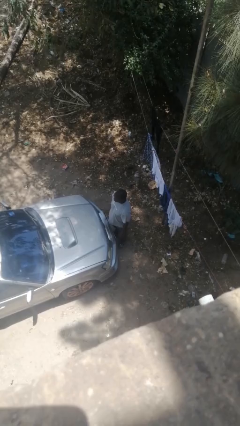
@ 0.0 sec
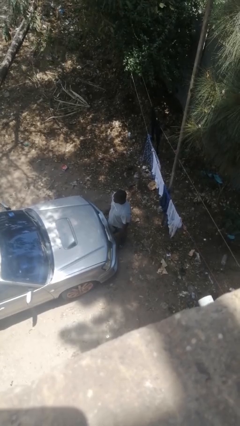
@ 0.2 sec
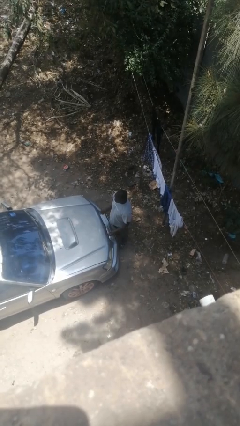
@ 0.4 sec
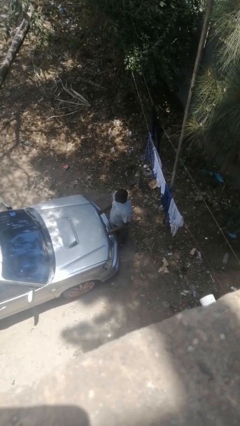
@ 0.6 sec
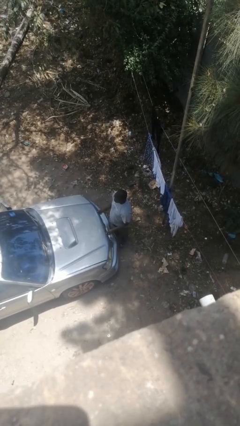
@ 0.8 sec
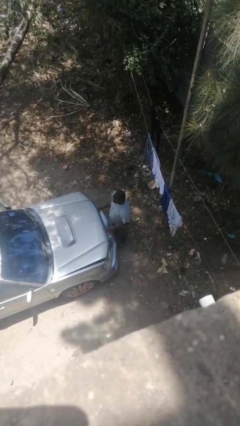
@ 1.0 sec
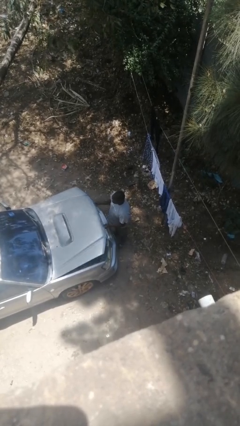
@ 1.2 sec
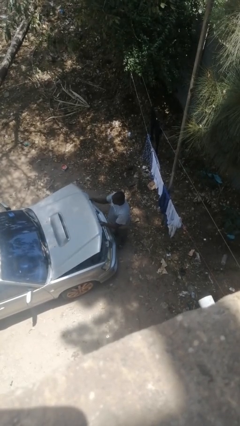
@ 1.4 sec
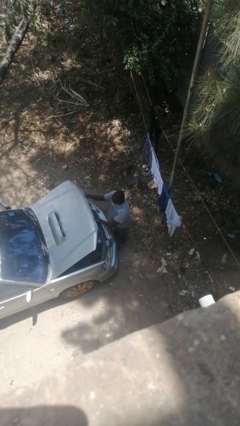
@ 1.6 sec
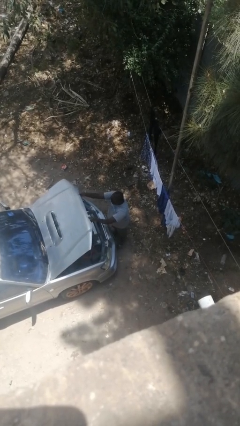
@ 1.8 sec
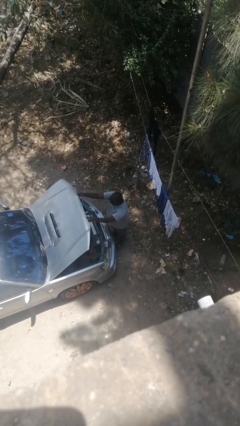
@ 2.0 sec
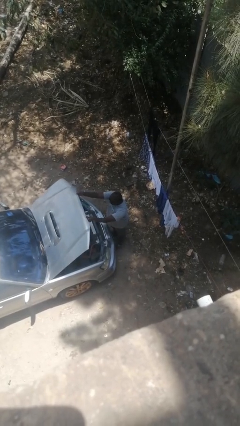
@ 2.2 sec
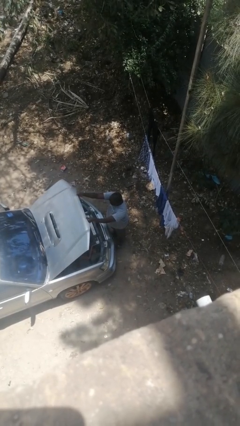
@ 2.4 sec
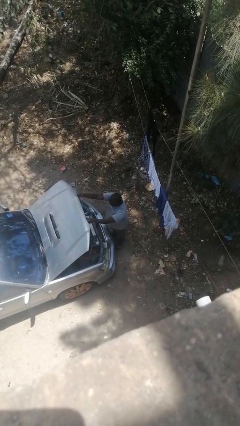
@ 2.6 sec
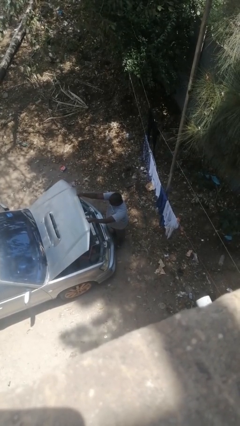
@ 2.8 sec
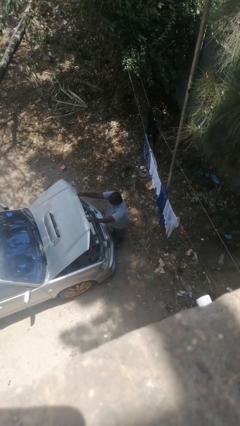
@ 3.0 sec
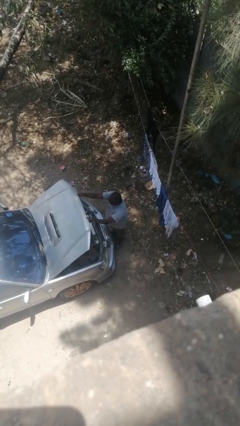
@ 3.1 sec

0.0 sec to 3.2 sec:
person opens car hood

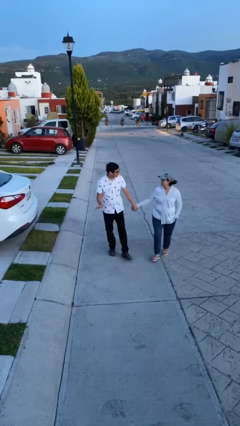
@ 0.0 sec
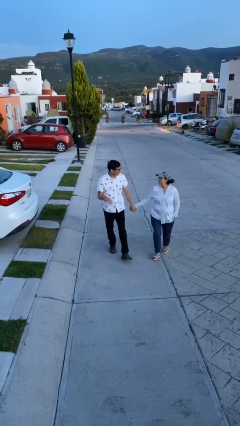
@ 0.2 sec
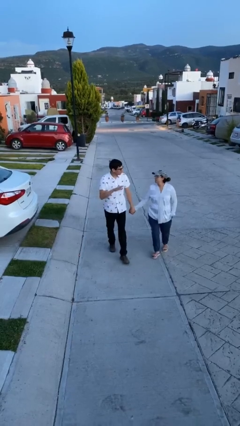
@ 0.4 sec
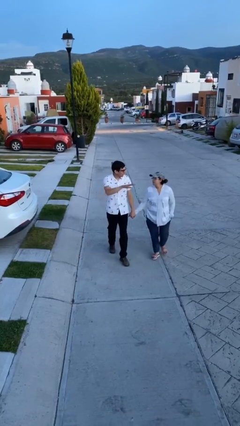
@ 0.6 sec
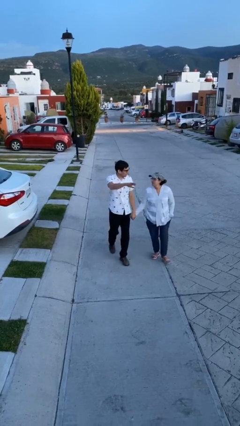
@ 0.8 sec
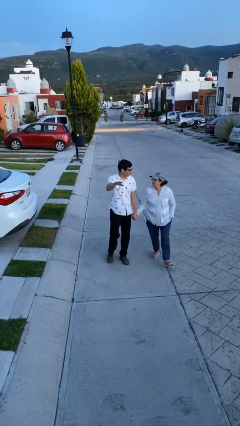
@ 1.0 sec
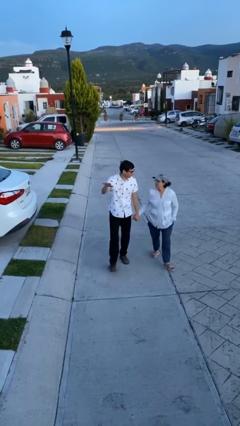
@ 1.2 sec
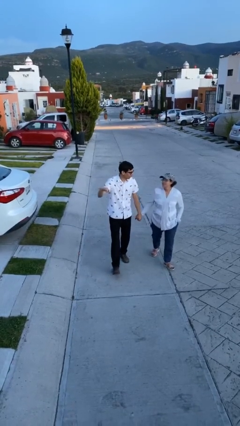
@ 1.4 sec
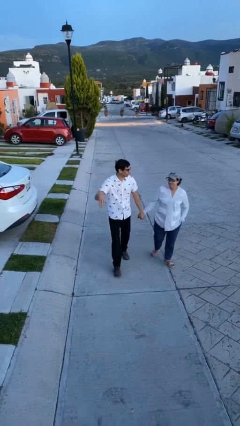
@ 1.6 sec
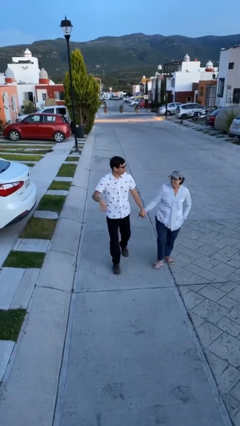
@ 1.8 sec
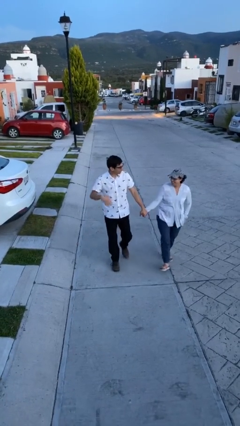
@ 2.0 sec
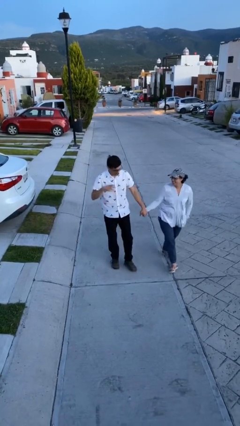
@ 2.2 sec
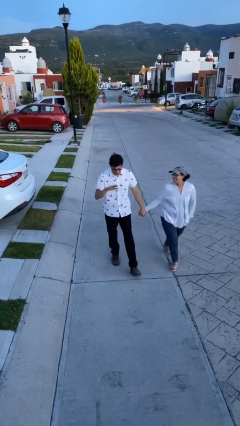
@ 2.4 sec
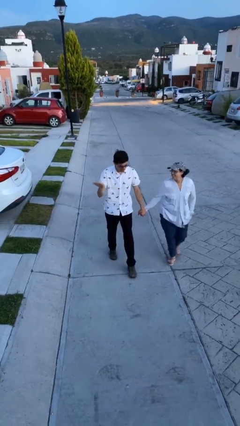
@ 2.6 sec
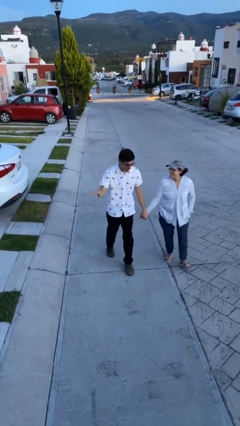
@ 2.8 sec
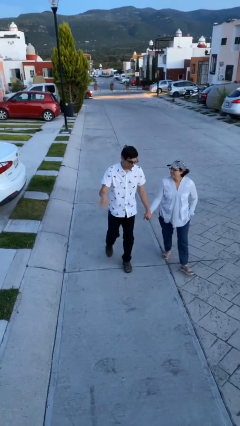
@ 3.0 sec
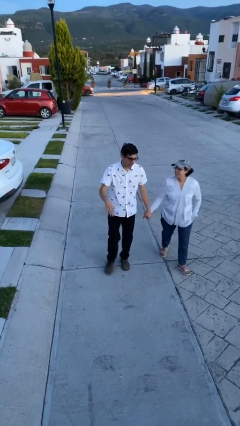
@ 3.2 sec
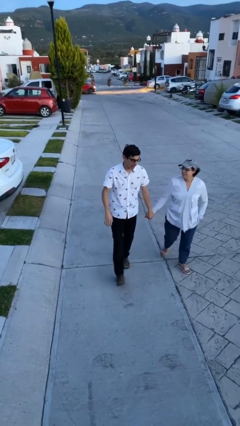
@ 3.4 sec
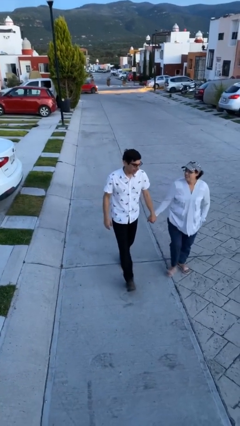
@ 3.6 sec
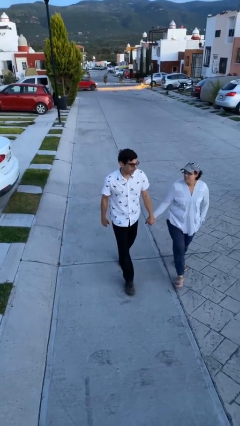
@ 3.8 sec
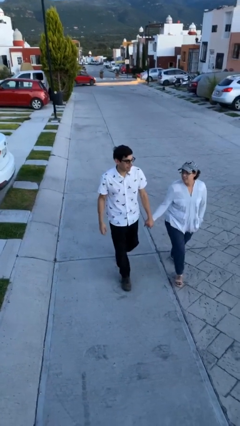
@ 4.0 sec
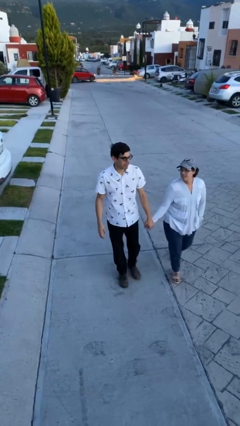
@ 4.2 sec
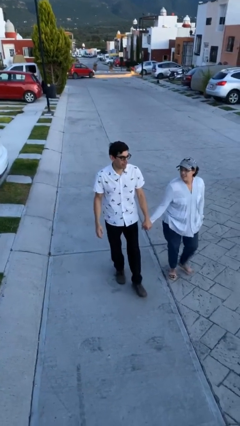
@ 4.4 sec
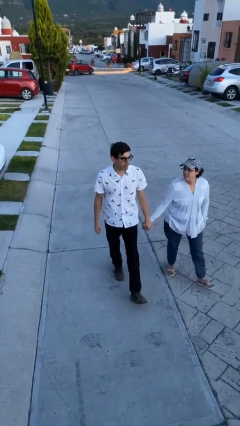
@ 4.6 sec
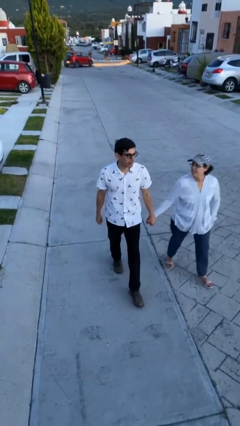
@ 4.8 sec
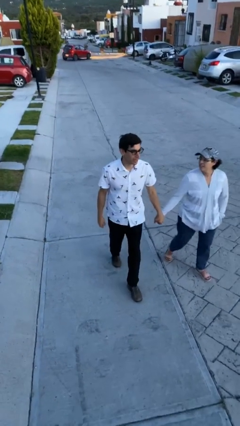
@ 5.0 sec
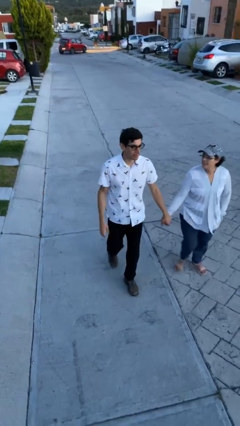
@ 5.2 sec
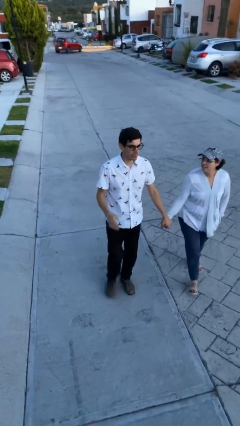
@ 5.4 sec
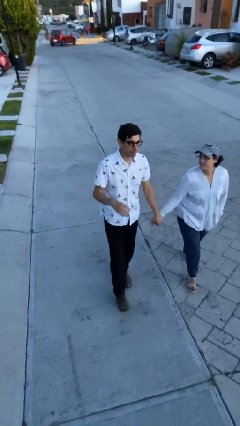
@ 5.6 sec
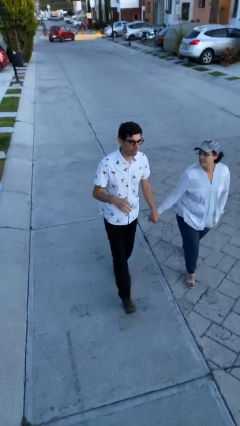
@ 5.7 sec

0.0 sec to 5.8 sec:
person holds hand

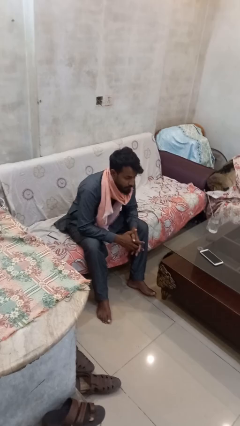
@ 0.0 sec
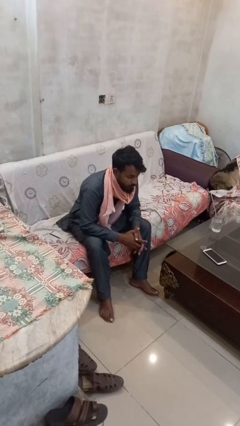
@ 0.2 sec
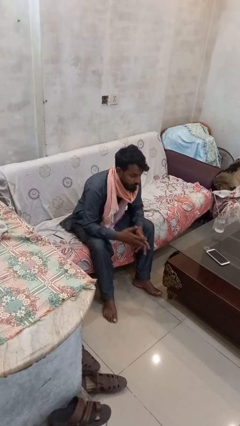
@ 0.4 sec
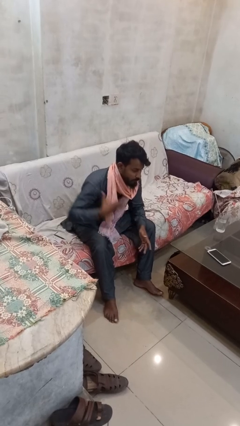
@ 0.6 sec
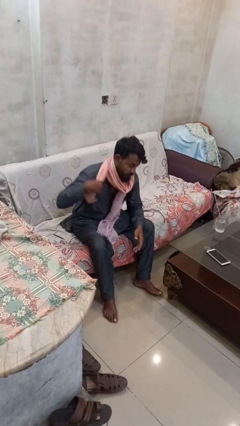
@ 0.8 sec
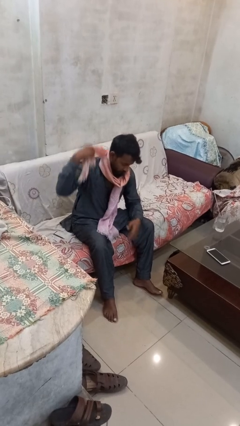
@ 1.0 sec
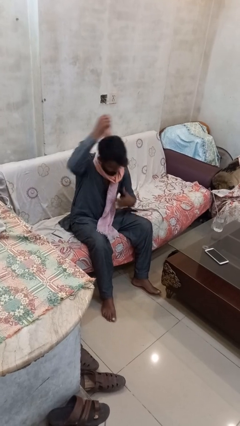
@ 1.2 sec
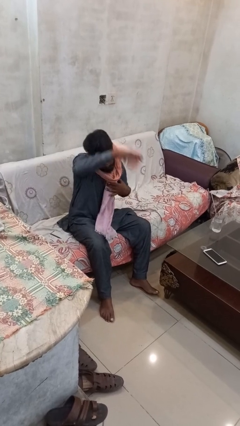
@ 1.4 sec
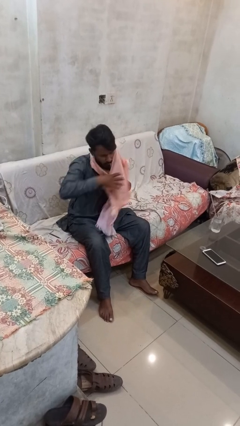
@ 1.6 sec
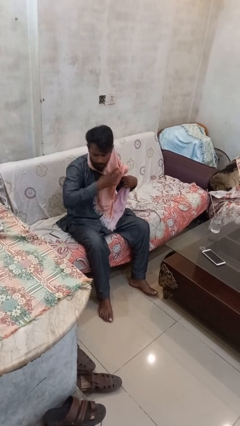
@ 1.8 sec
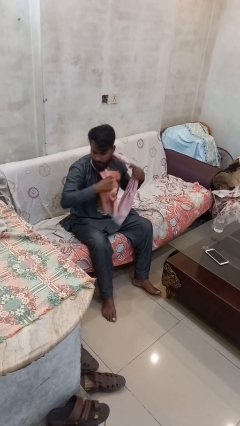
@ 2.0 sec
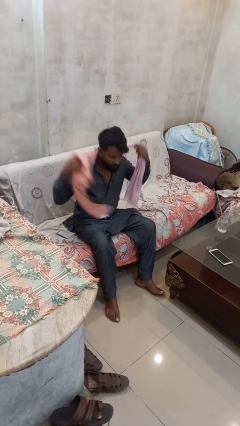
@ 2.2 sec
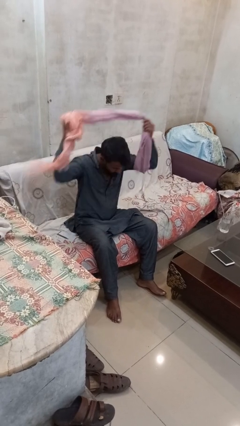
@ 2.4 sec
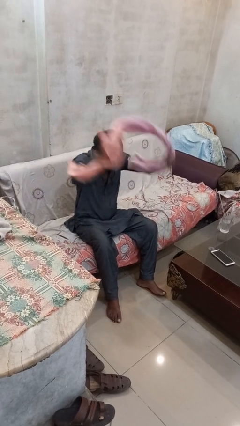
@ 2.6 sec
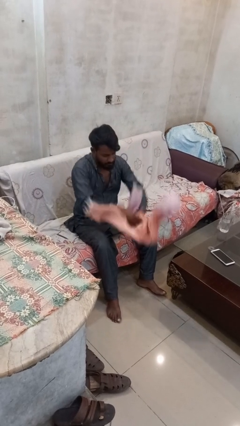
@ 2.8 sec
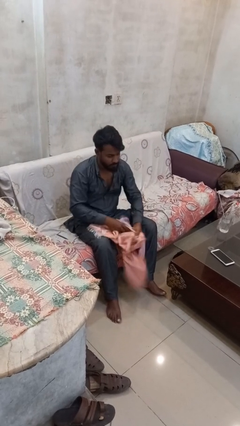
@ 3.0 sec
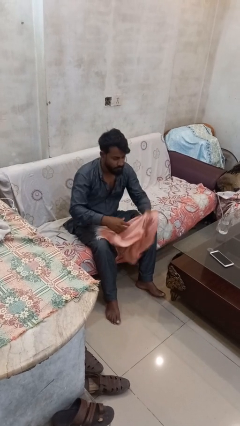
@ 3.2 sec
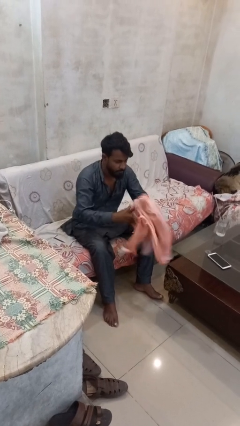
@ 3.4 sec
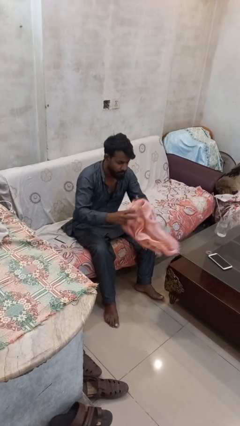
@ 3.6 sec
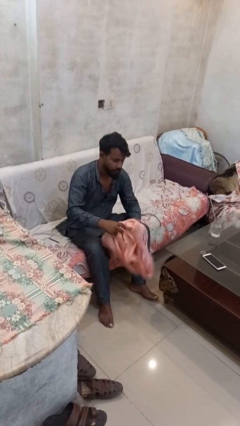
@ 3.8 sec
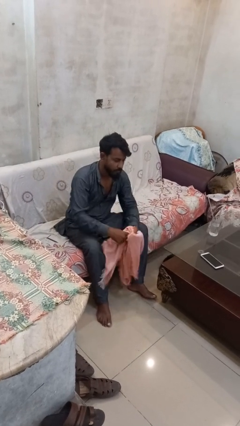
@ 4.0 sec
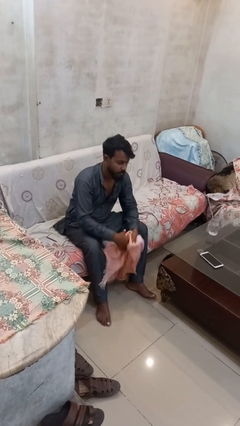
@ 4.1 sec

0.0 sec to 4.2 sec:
person takes off scarf

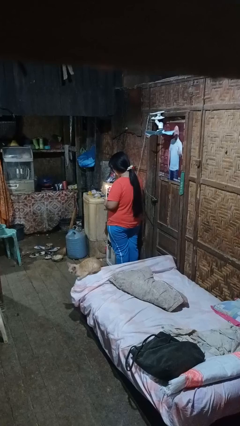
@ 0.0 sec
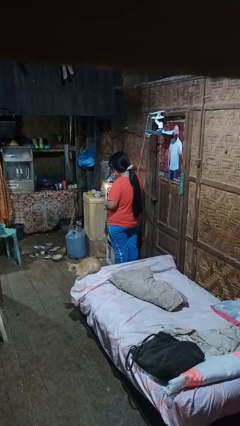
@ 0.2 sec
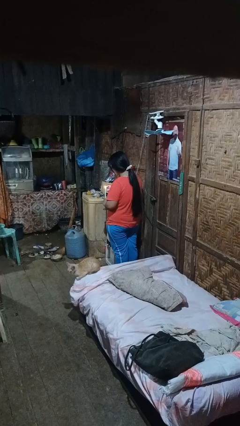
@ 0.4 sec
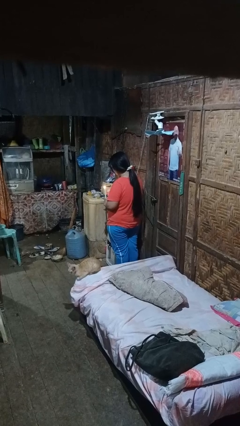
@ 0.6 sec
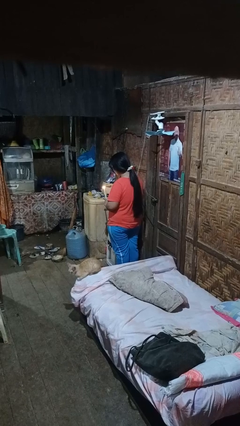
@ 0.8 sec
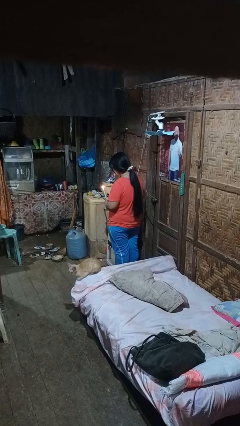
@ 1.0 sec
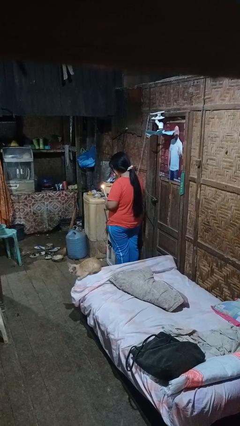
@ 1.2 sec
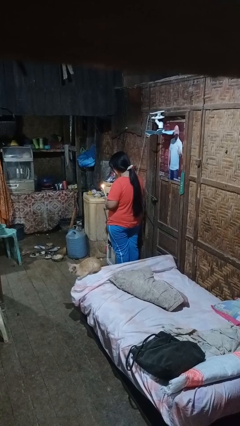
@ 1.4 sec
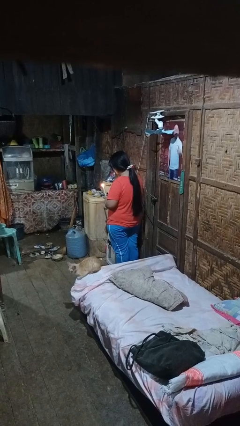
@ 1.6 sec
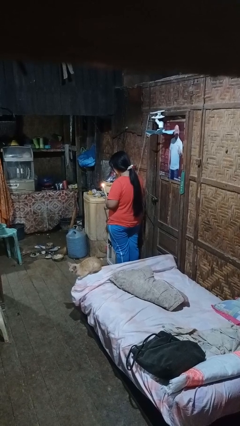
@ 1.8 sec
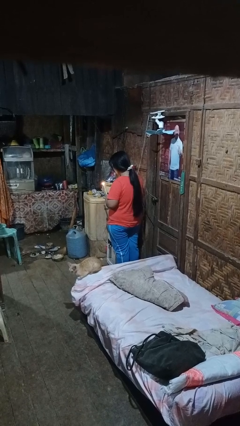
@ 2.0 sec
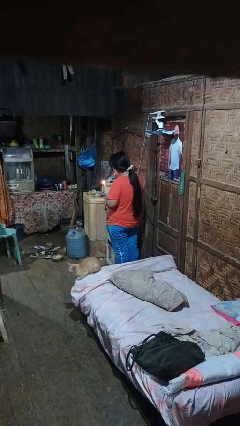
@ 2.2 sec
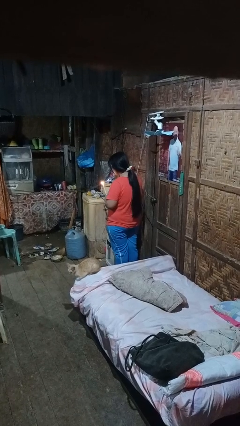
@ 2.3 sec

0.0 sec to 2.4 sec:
person lights candle

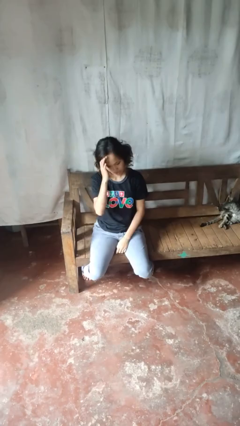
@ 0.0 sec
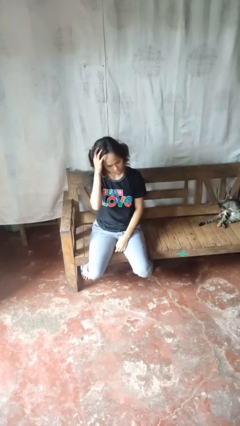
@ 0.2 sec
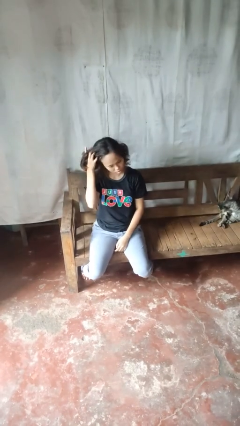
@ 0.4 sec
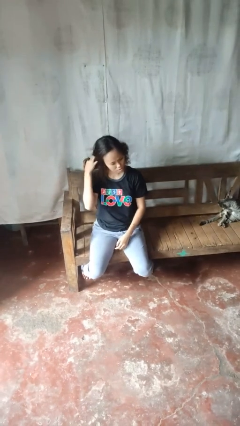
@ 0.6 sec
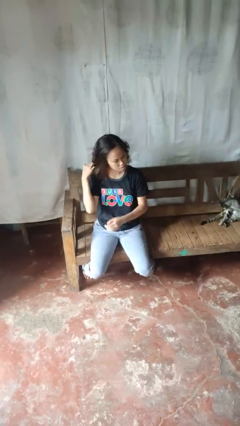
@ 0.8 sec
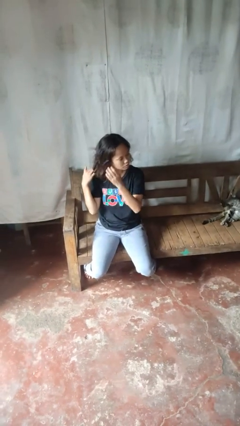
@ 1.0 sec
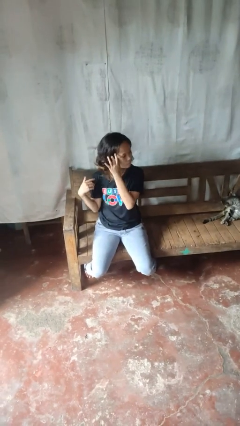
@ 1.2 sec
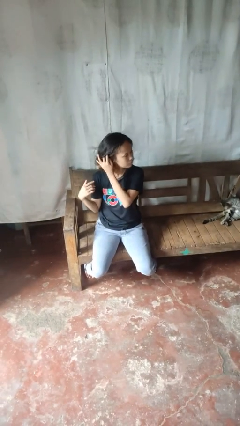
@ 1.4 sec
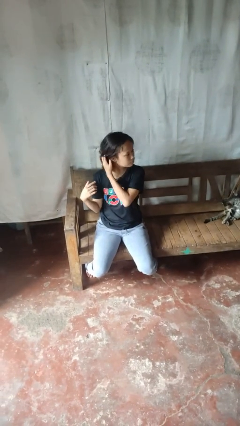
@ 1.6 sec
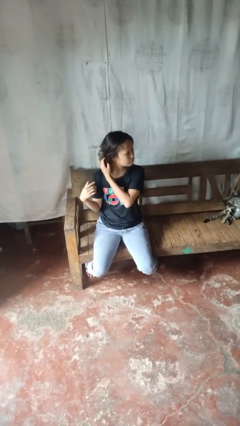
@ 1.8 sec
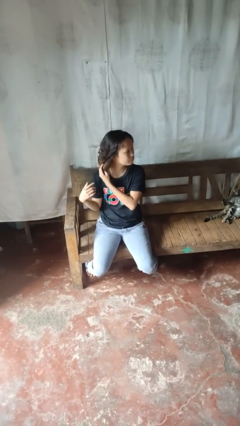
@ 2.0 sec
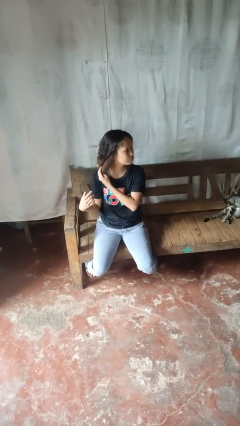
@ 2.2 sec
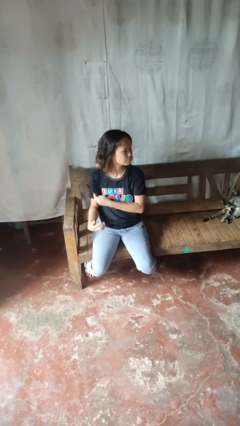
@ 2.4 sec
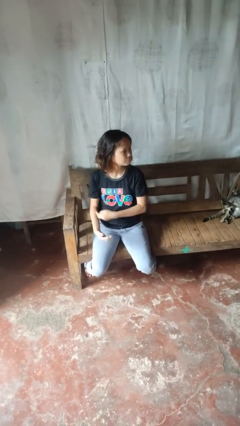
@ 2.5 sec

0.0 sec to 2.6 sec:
person strokes hair
